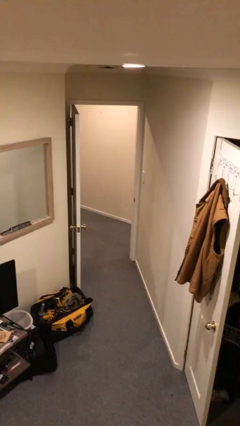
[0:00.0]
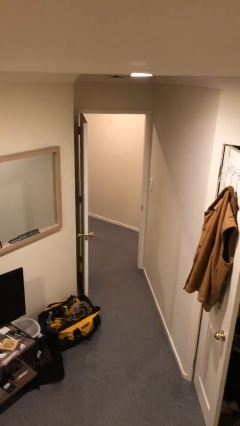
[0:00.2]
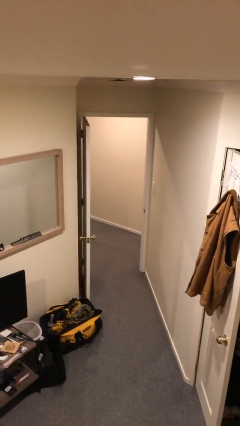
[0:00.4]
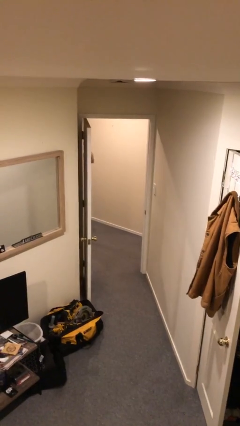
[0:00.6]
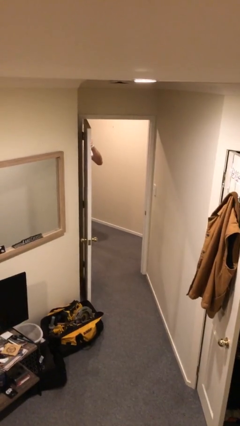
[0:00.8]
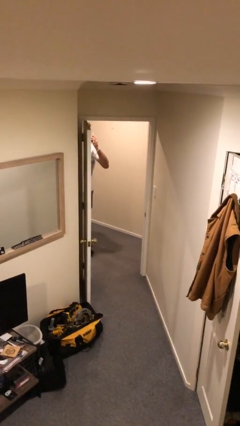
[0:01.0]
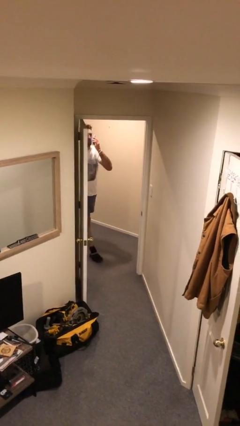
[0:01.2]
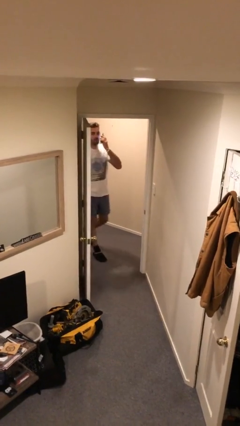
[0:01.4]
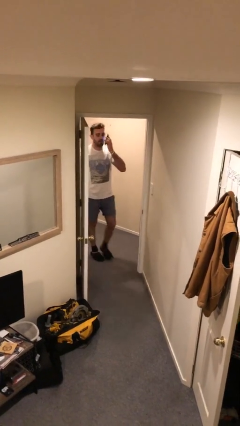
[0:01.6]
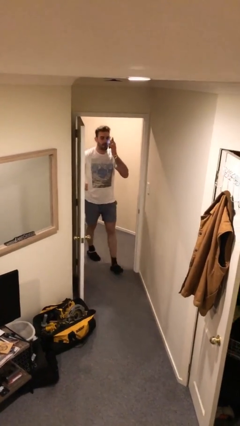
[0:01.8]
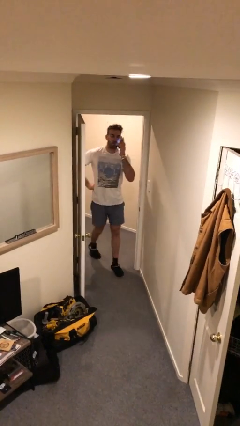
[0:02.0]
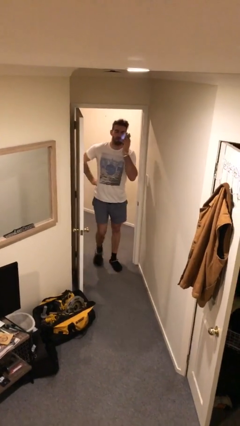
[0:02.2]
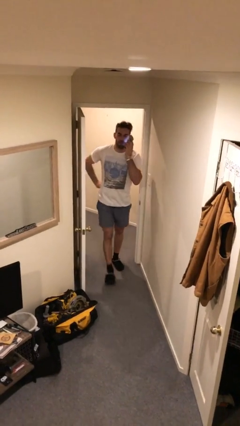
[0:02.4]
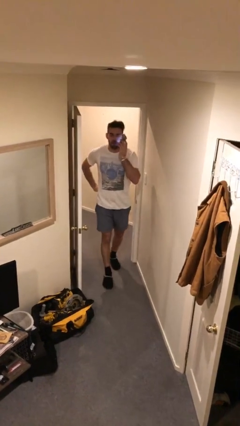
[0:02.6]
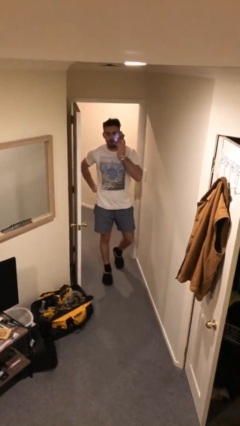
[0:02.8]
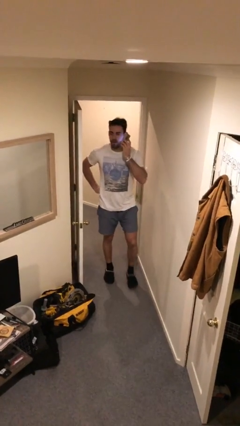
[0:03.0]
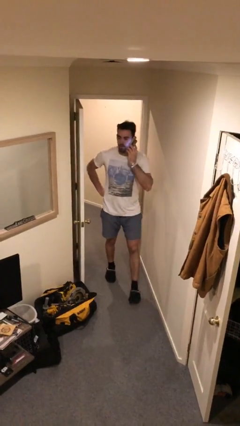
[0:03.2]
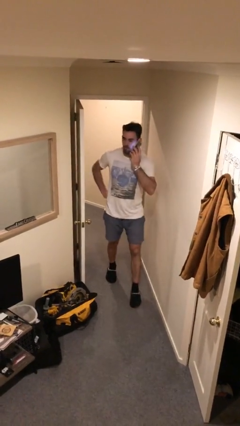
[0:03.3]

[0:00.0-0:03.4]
person enters scene through structure

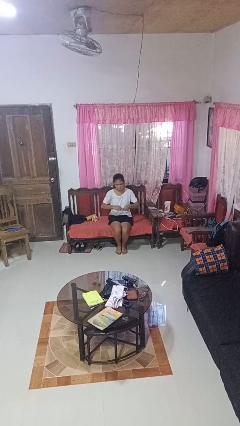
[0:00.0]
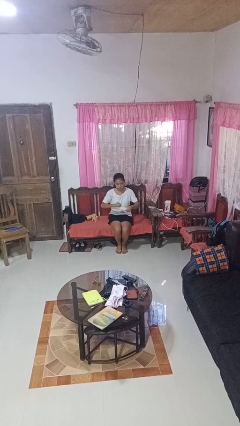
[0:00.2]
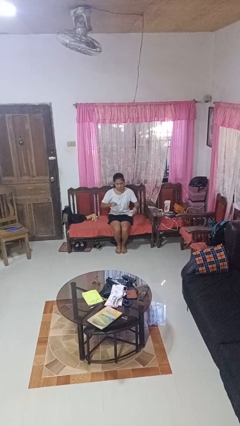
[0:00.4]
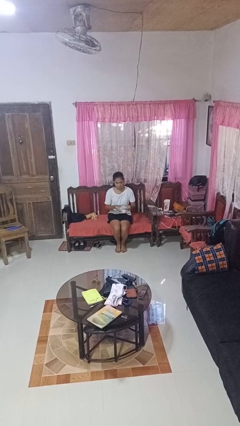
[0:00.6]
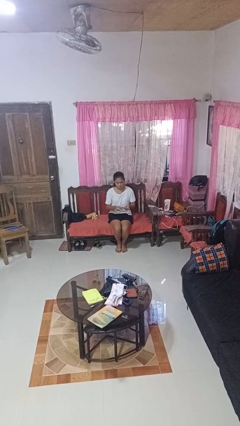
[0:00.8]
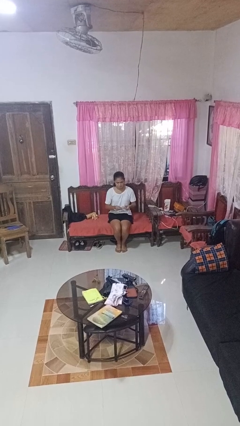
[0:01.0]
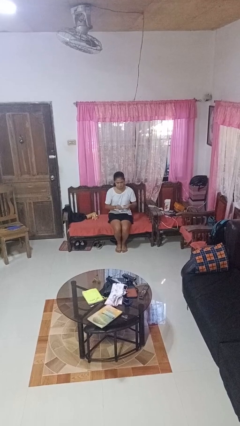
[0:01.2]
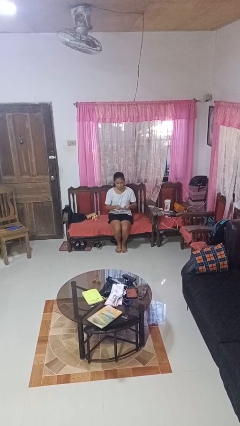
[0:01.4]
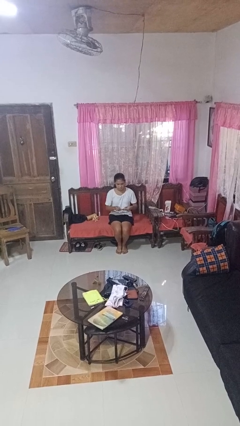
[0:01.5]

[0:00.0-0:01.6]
person tears paper

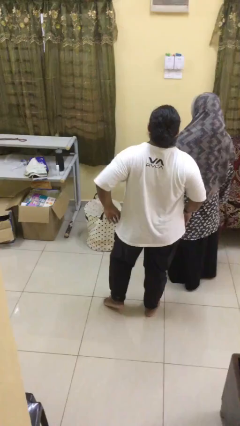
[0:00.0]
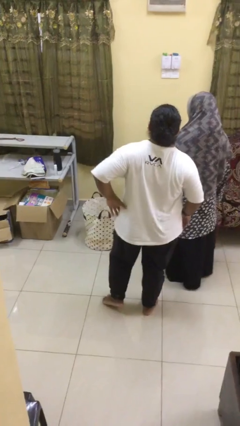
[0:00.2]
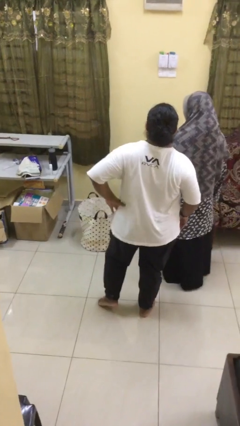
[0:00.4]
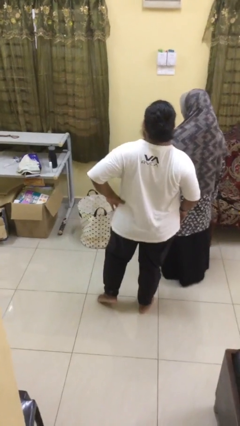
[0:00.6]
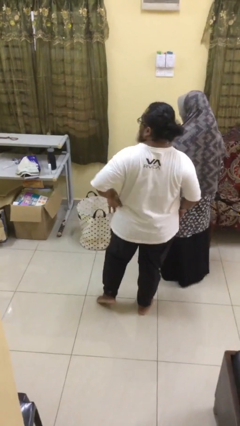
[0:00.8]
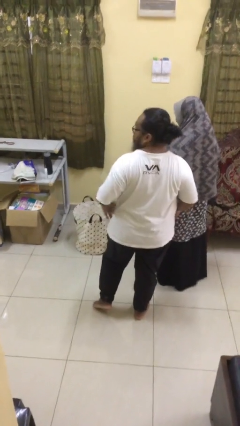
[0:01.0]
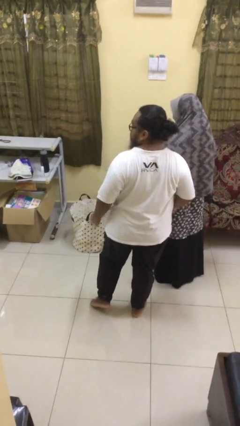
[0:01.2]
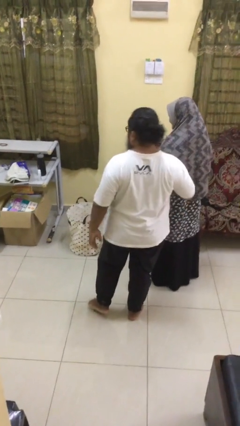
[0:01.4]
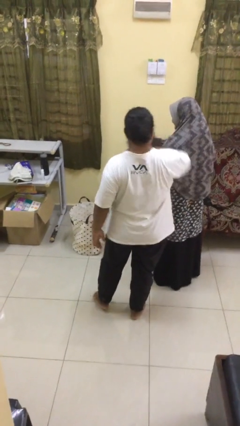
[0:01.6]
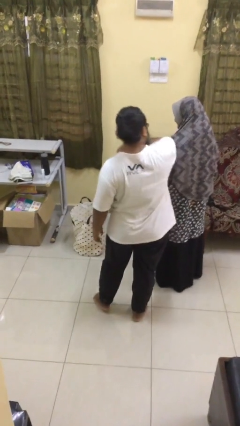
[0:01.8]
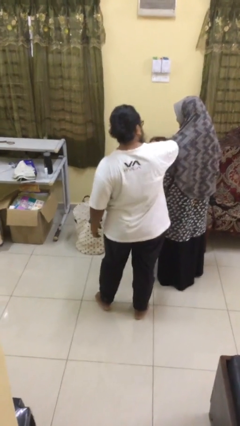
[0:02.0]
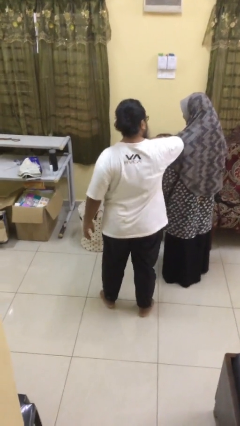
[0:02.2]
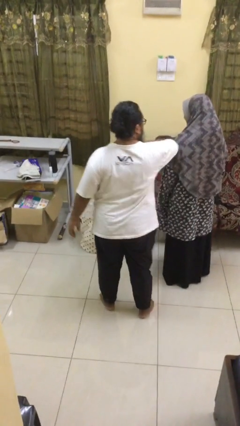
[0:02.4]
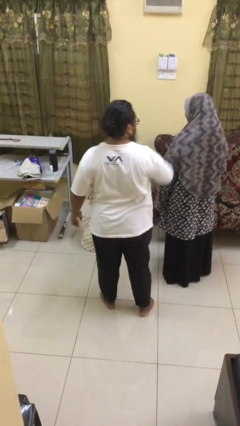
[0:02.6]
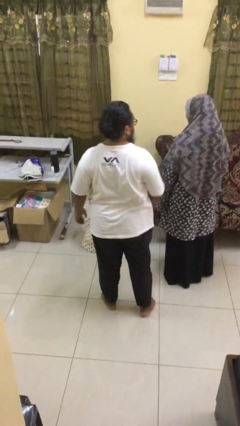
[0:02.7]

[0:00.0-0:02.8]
person nudges person with elbow

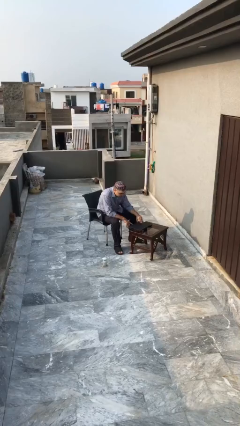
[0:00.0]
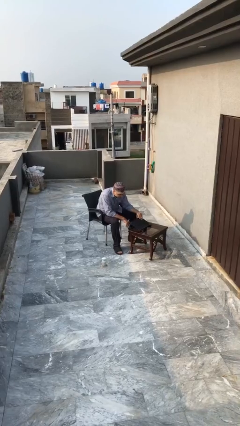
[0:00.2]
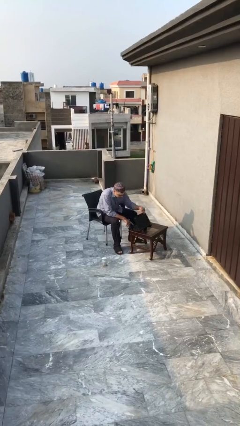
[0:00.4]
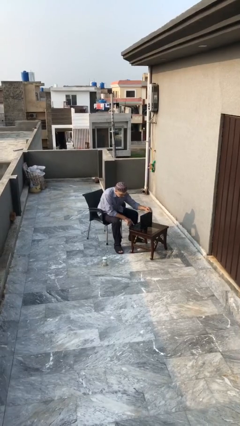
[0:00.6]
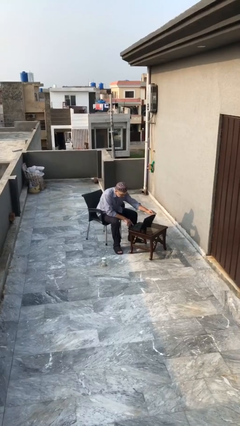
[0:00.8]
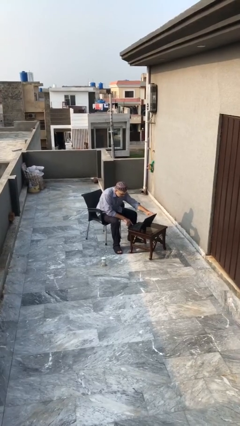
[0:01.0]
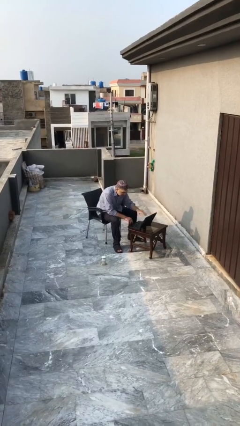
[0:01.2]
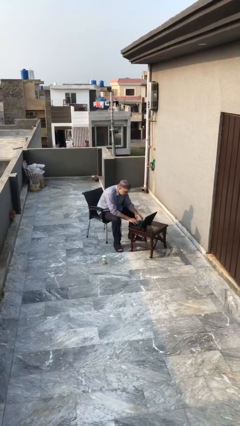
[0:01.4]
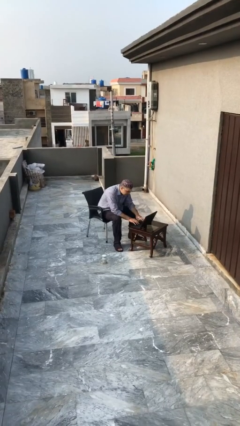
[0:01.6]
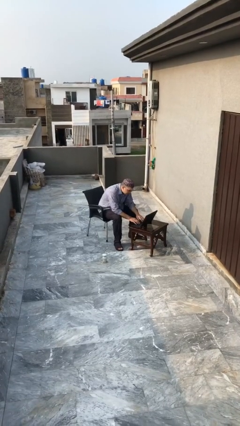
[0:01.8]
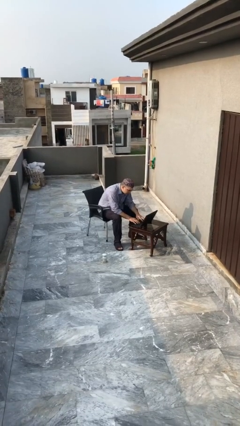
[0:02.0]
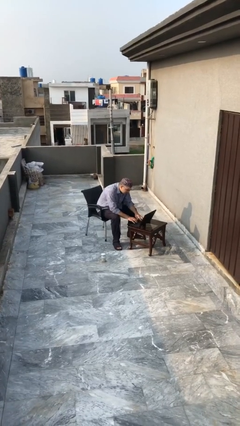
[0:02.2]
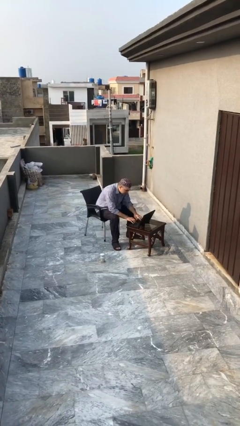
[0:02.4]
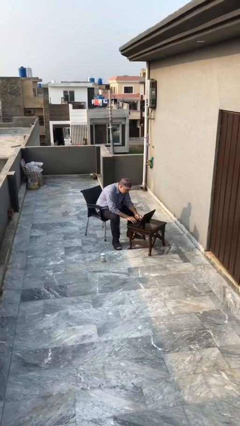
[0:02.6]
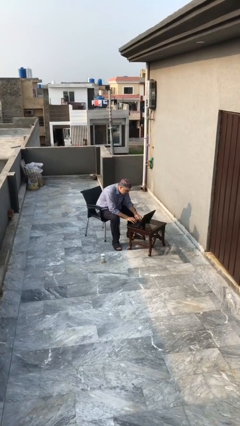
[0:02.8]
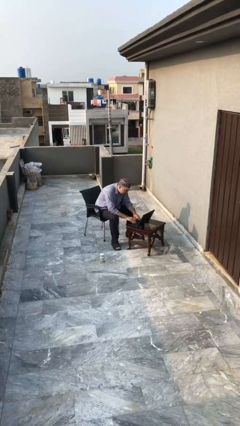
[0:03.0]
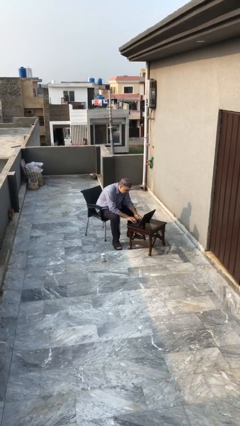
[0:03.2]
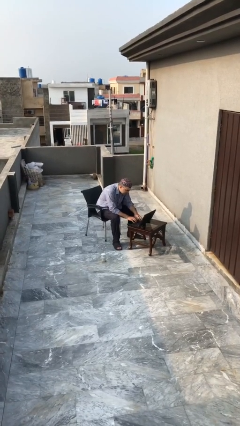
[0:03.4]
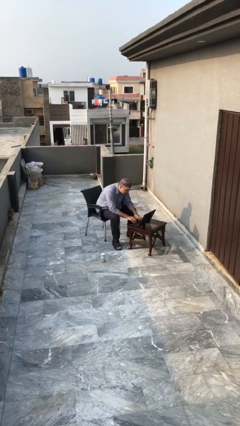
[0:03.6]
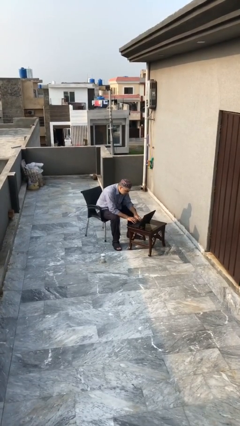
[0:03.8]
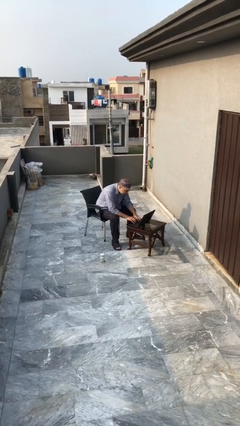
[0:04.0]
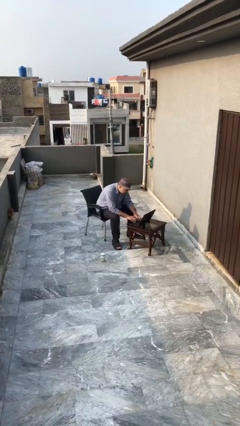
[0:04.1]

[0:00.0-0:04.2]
person interacts with laptop

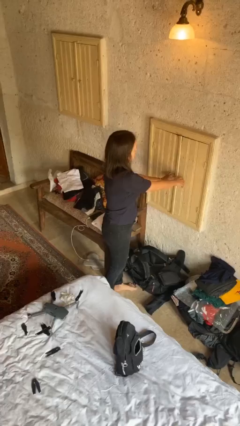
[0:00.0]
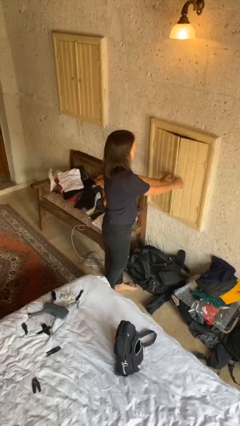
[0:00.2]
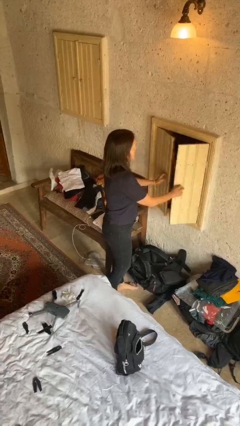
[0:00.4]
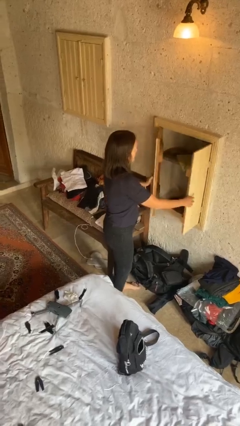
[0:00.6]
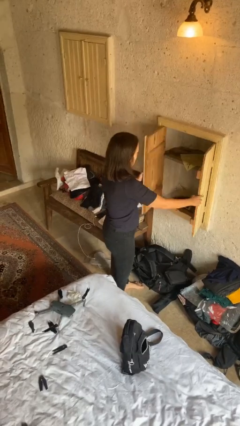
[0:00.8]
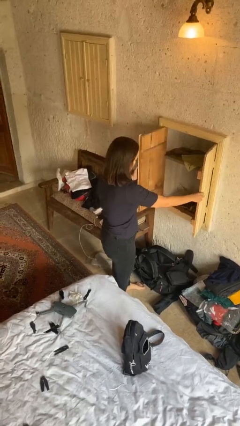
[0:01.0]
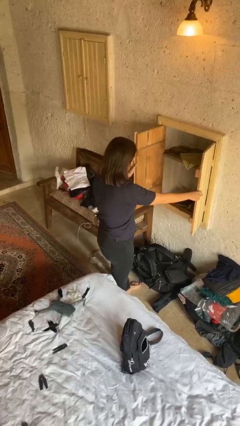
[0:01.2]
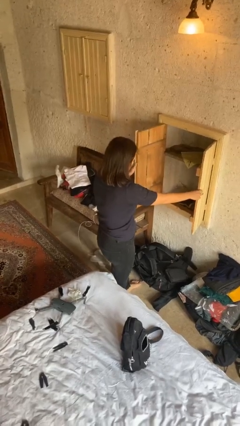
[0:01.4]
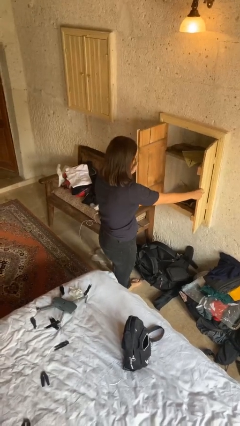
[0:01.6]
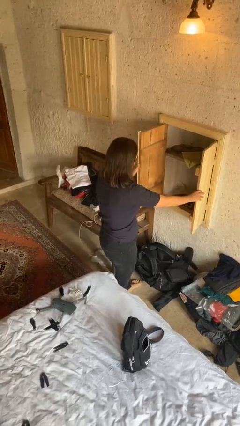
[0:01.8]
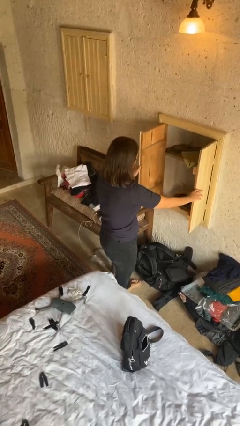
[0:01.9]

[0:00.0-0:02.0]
person opens closet door

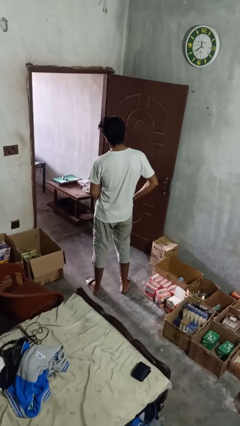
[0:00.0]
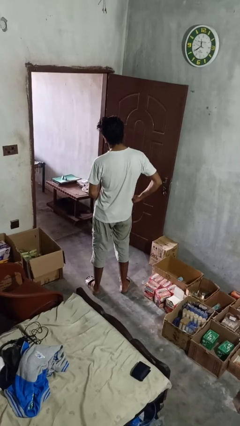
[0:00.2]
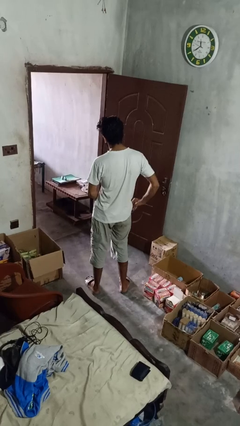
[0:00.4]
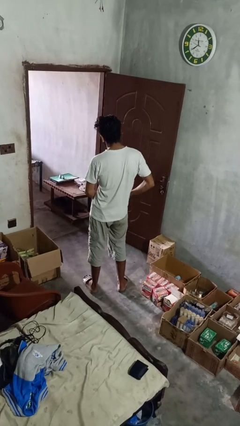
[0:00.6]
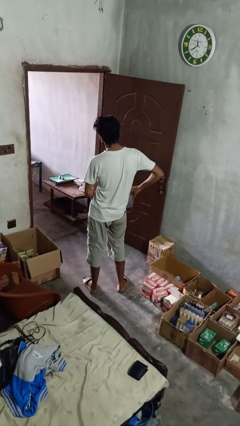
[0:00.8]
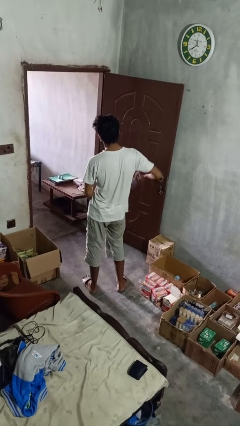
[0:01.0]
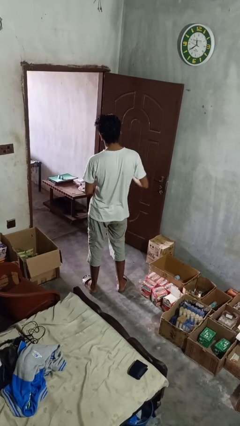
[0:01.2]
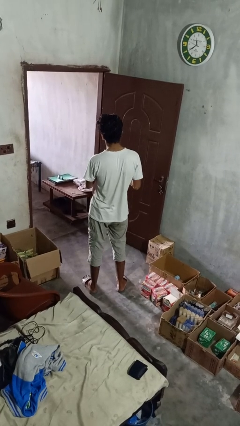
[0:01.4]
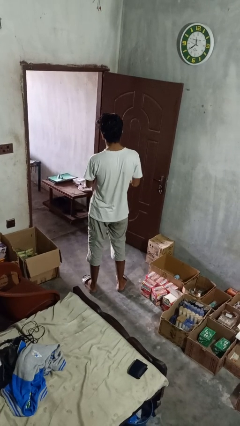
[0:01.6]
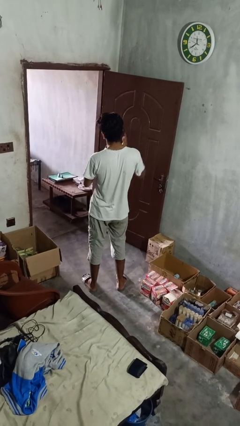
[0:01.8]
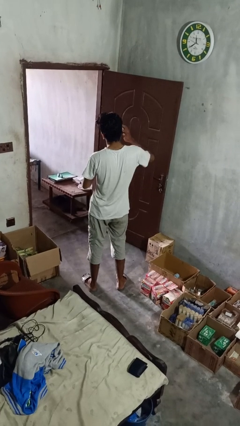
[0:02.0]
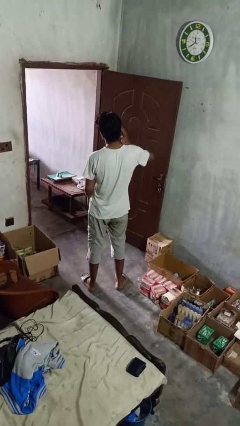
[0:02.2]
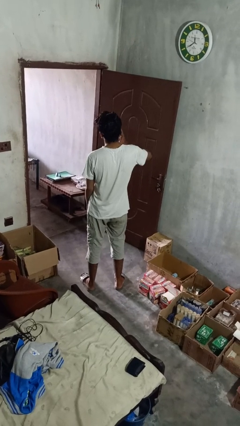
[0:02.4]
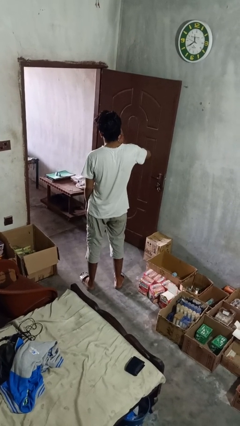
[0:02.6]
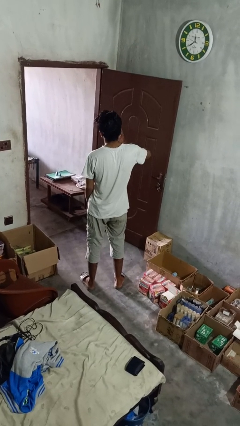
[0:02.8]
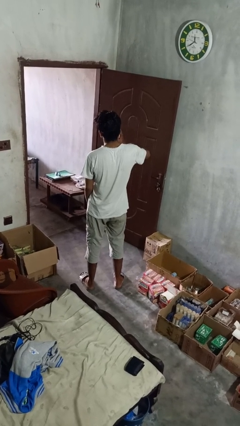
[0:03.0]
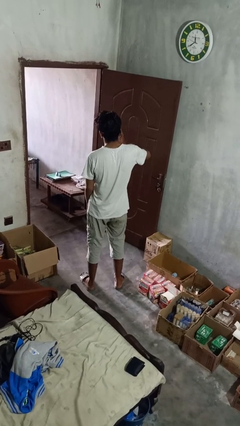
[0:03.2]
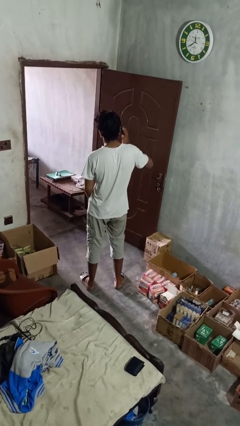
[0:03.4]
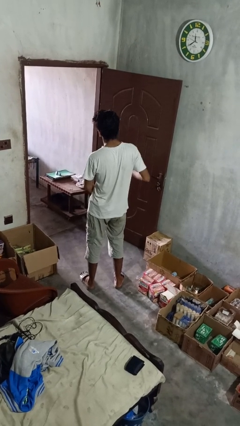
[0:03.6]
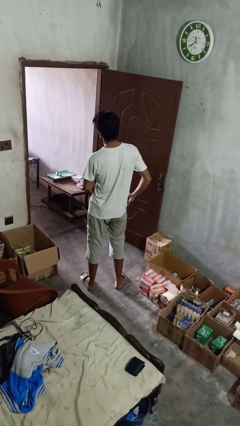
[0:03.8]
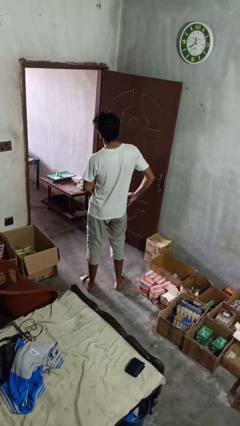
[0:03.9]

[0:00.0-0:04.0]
person takes phone from pocket
